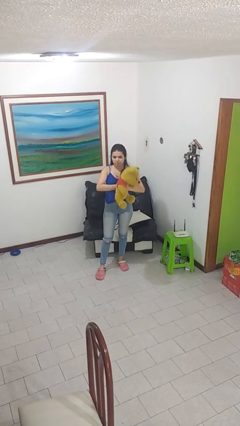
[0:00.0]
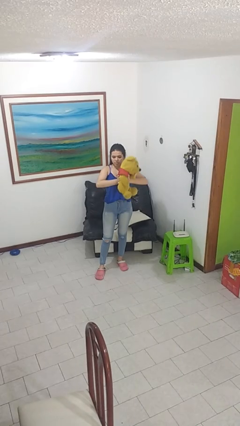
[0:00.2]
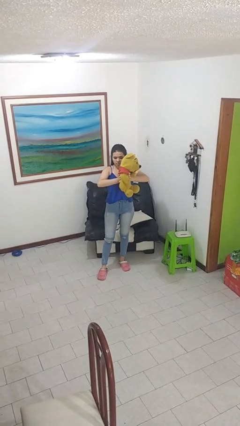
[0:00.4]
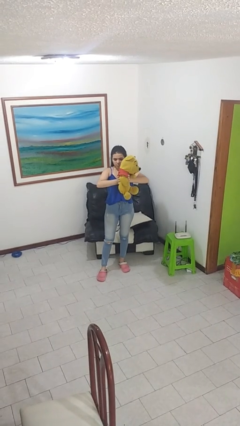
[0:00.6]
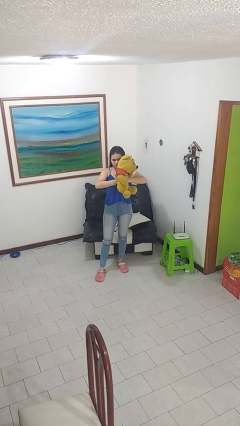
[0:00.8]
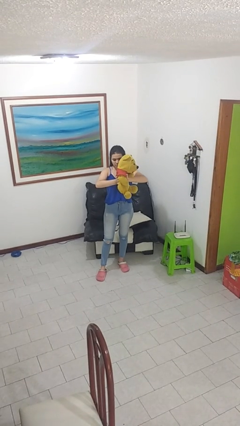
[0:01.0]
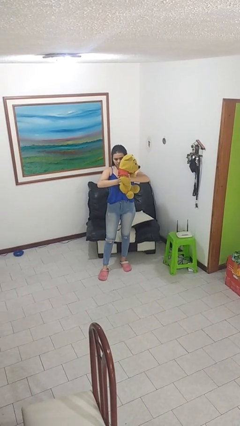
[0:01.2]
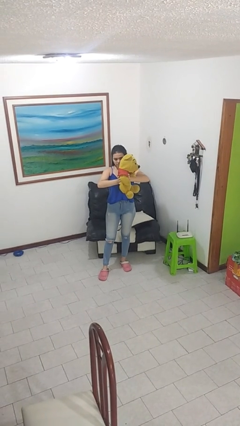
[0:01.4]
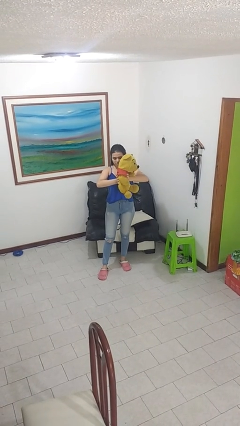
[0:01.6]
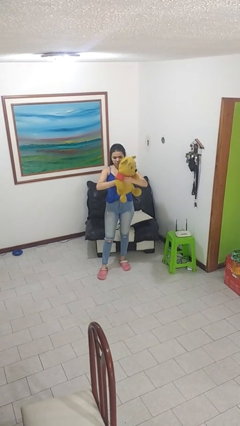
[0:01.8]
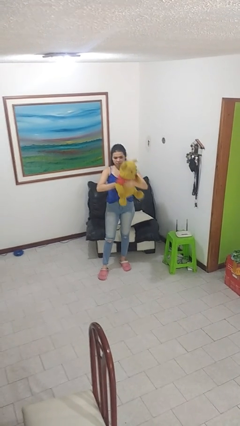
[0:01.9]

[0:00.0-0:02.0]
person squeezes object

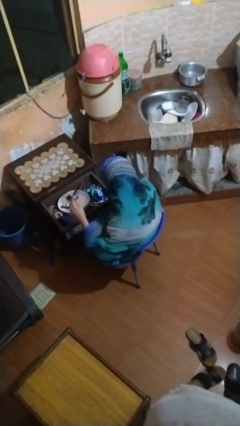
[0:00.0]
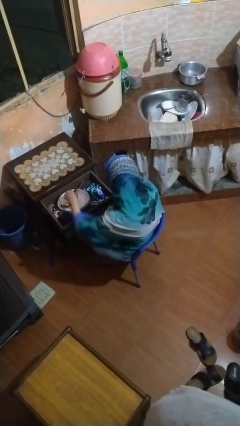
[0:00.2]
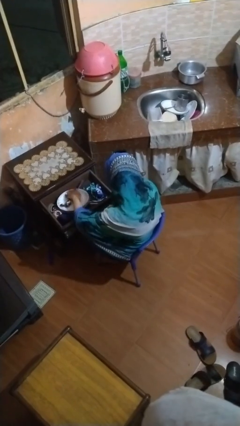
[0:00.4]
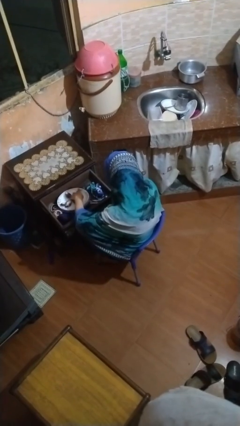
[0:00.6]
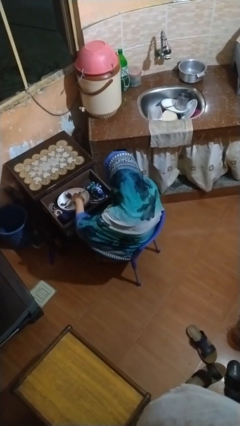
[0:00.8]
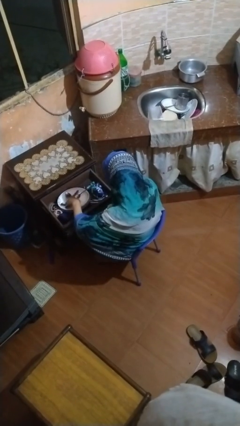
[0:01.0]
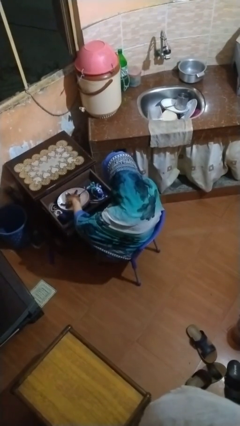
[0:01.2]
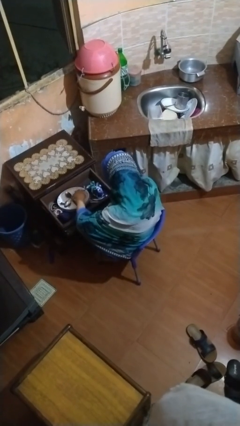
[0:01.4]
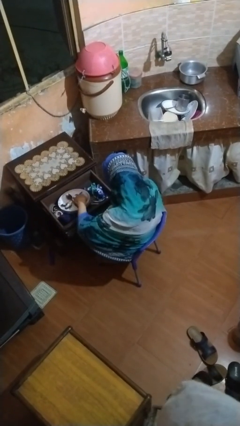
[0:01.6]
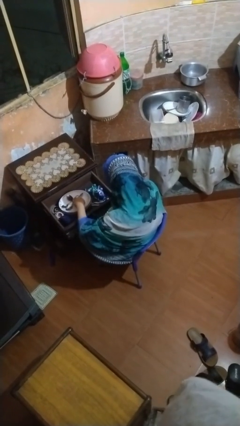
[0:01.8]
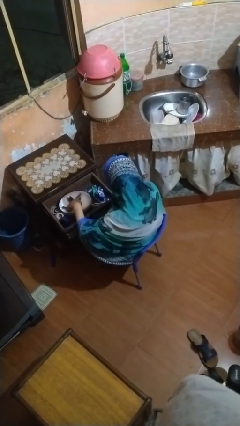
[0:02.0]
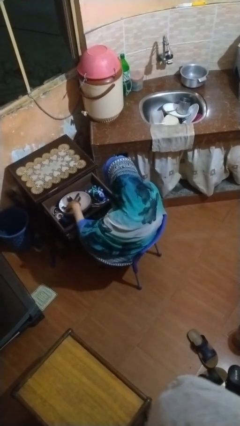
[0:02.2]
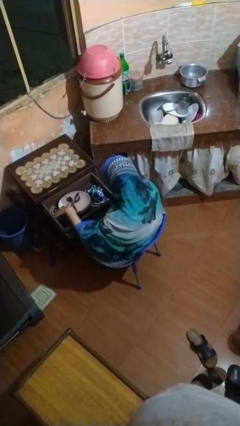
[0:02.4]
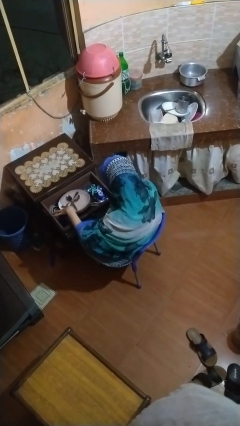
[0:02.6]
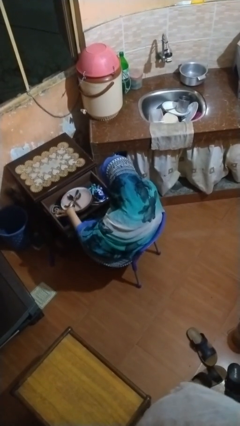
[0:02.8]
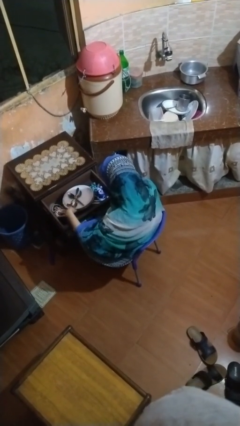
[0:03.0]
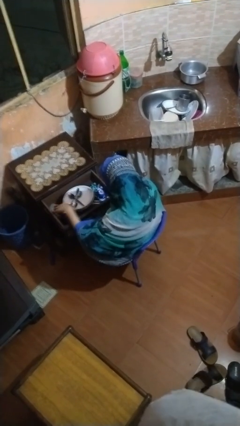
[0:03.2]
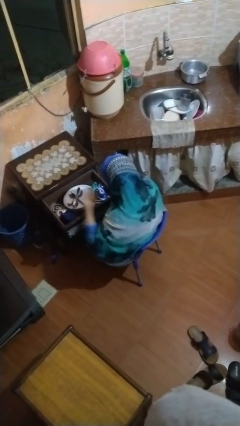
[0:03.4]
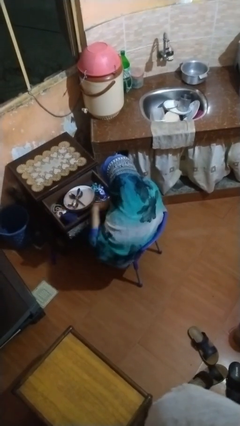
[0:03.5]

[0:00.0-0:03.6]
person searches in kitchen drawer

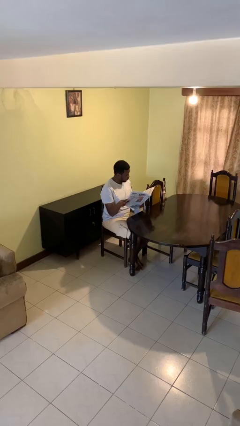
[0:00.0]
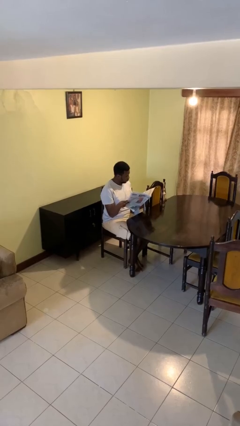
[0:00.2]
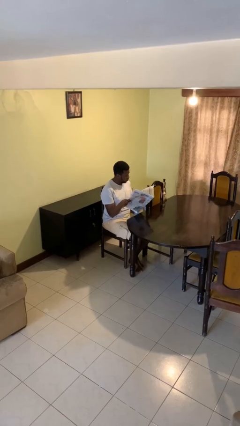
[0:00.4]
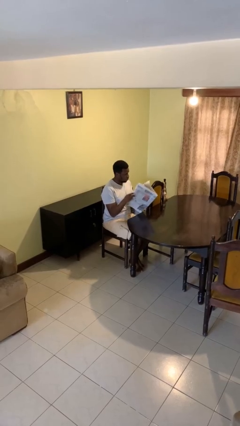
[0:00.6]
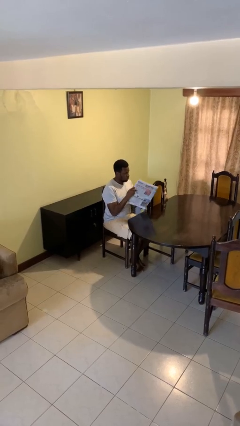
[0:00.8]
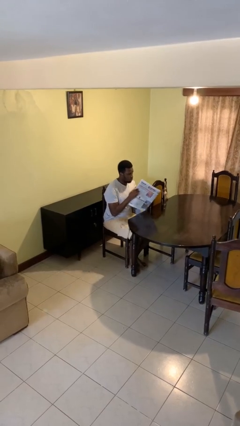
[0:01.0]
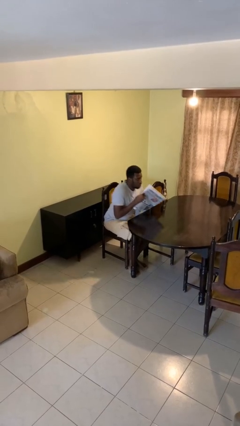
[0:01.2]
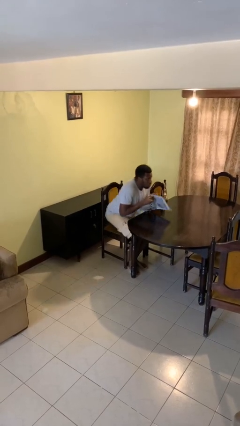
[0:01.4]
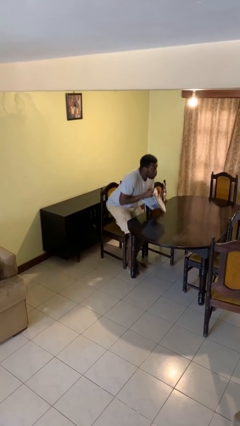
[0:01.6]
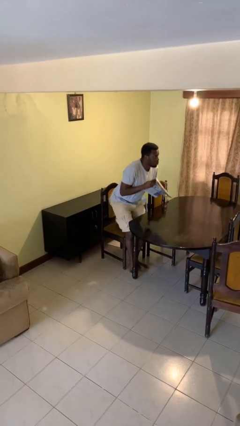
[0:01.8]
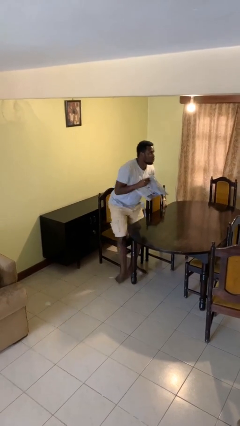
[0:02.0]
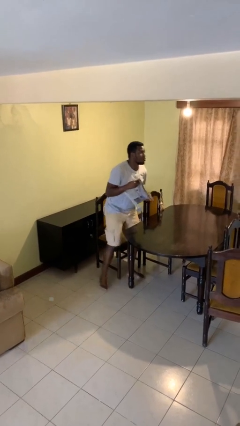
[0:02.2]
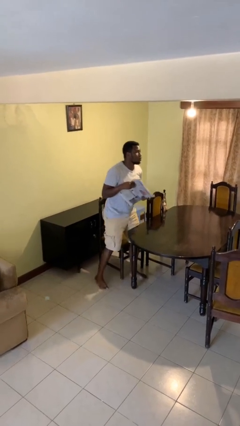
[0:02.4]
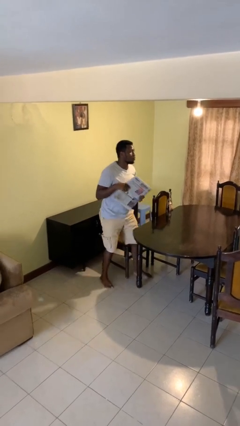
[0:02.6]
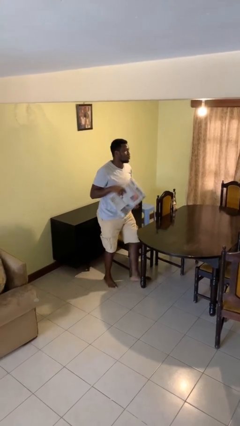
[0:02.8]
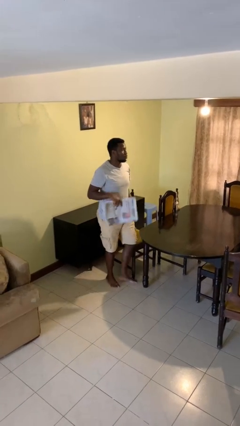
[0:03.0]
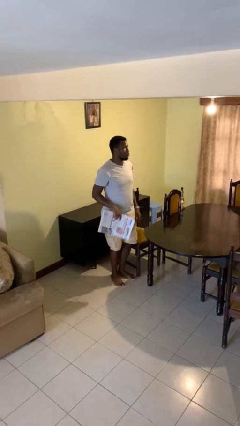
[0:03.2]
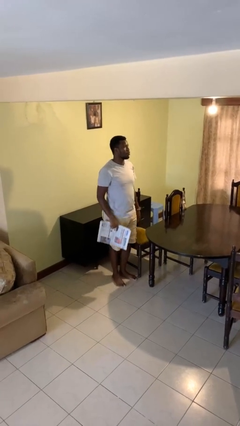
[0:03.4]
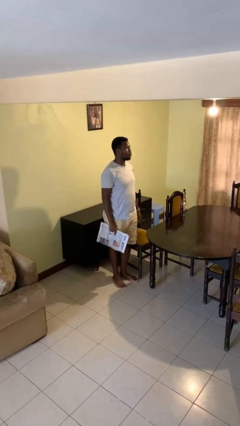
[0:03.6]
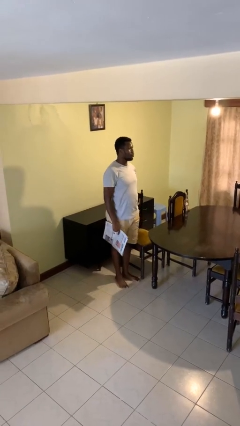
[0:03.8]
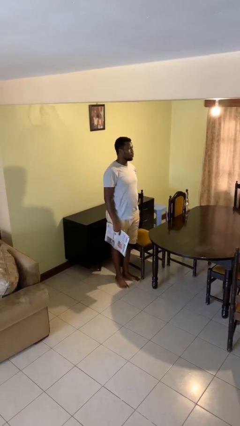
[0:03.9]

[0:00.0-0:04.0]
person stands up

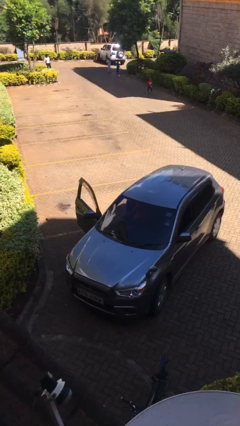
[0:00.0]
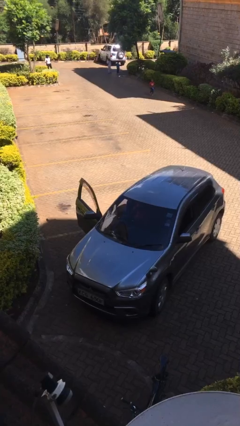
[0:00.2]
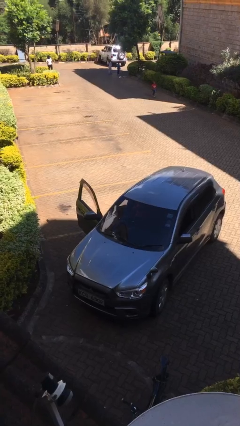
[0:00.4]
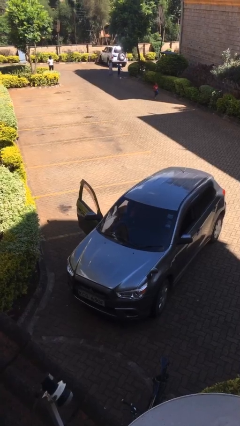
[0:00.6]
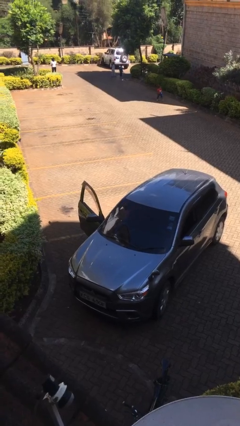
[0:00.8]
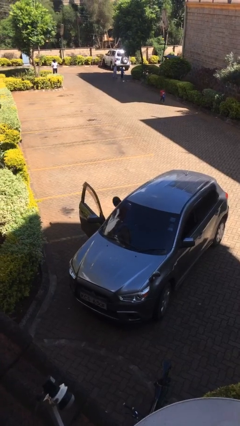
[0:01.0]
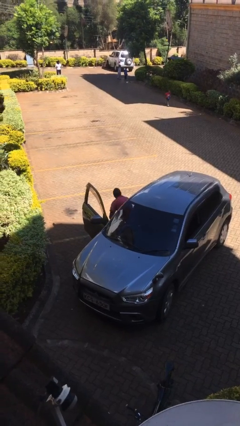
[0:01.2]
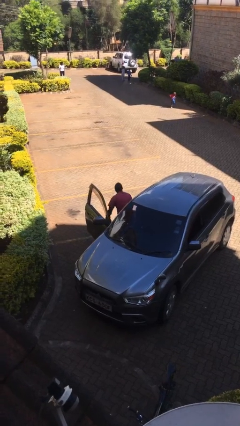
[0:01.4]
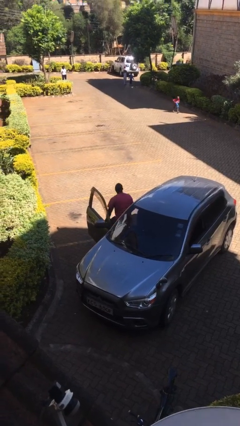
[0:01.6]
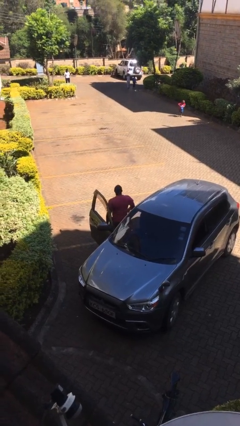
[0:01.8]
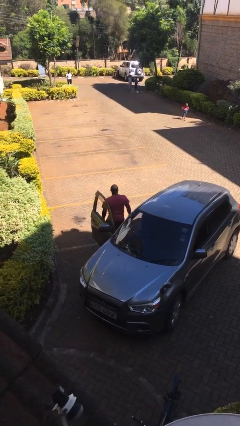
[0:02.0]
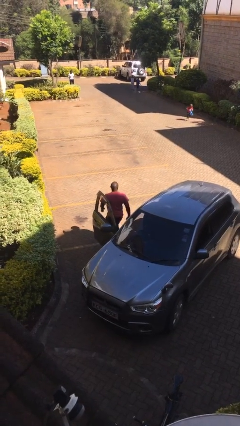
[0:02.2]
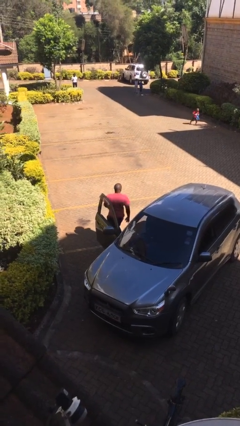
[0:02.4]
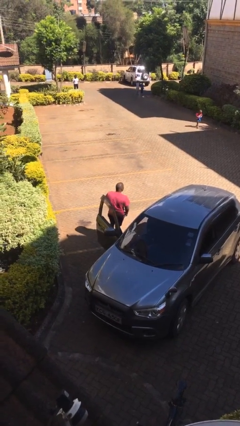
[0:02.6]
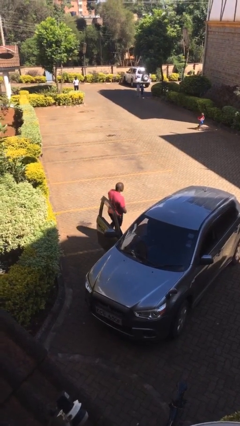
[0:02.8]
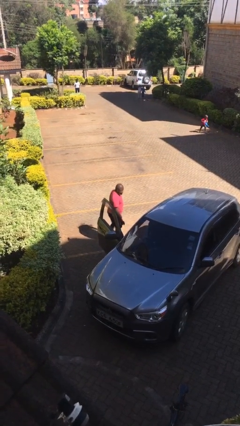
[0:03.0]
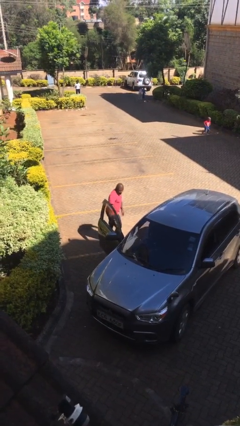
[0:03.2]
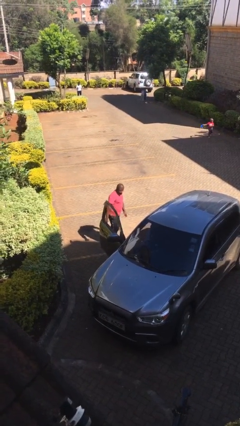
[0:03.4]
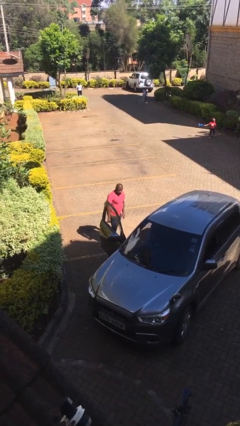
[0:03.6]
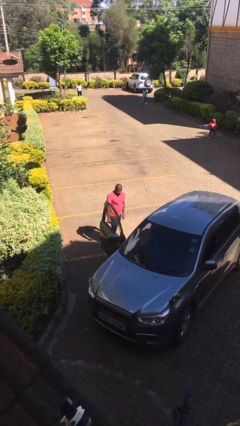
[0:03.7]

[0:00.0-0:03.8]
person exits car

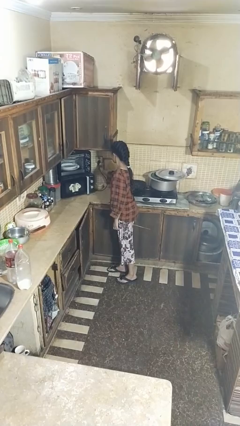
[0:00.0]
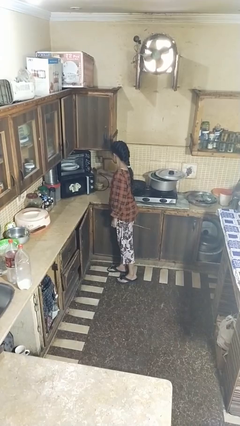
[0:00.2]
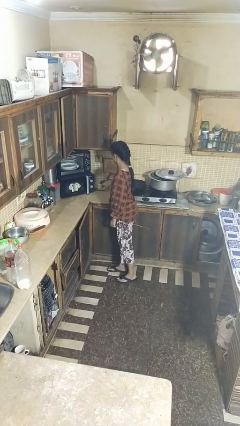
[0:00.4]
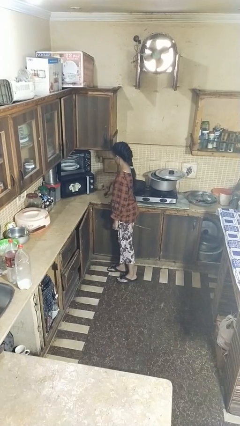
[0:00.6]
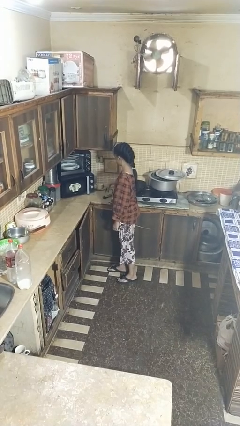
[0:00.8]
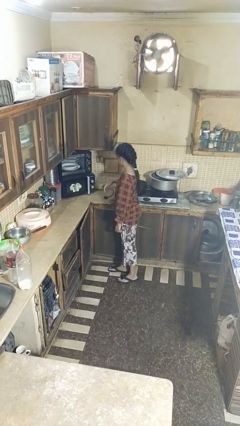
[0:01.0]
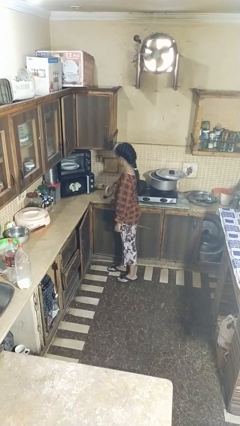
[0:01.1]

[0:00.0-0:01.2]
person unplugs from electrical socket

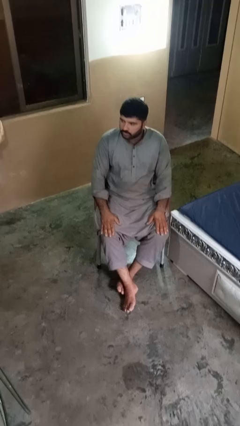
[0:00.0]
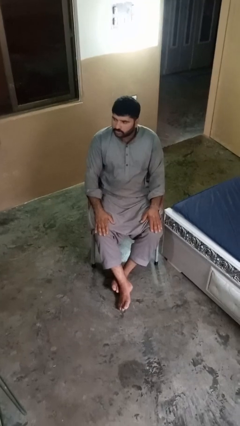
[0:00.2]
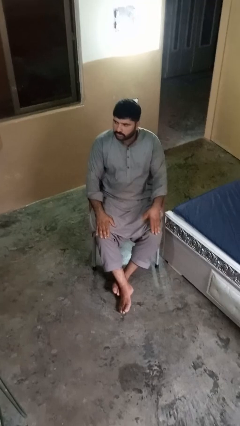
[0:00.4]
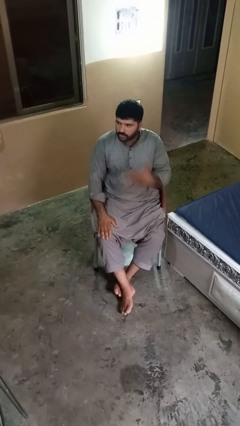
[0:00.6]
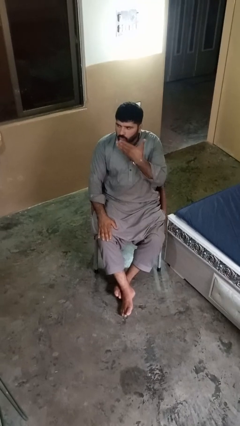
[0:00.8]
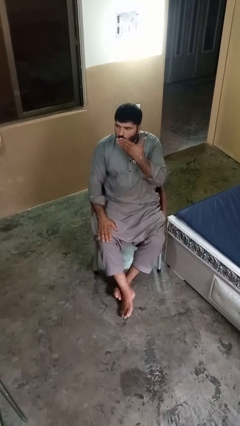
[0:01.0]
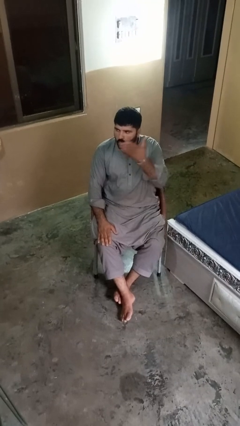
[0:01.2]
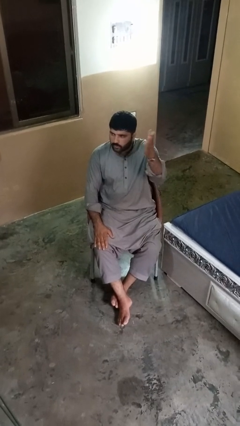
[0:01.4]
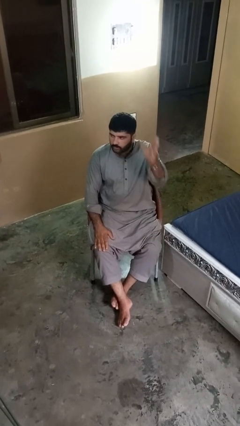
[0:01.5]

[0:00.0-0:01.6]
person gestures blow kiss

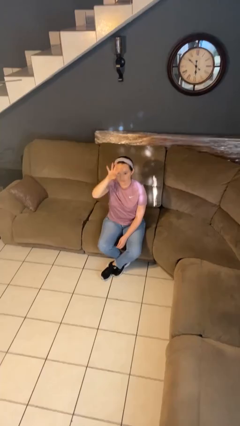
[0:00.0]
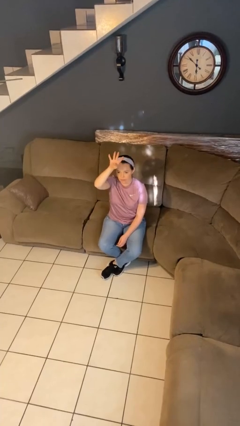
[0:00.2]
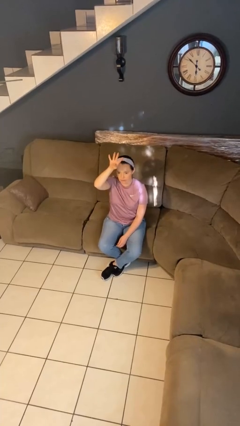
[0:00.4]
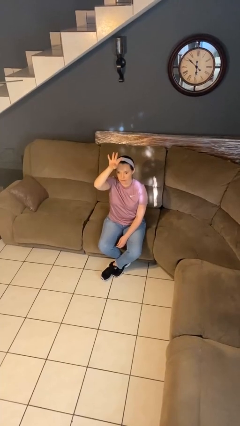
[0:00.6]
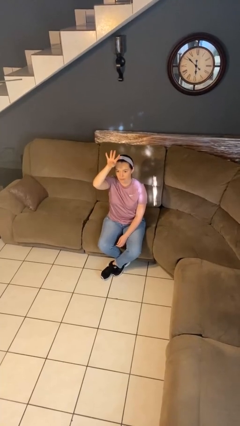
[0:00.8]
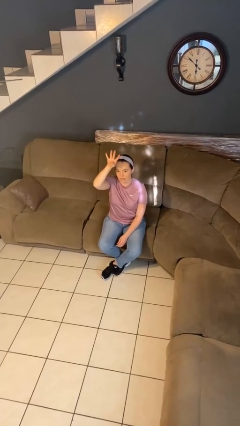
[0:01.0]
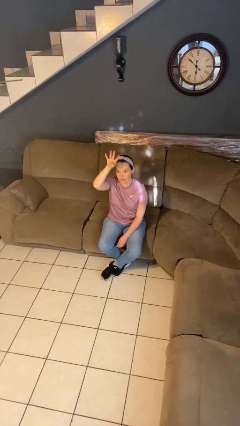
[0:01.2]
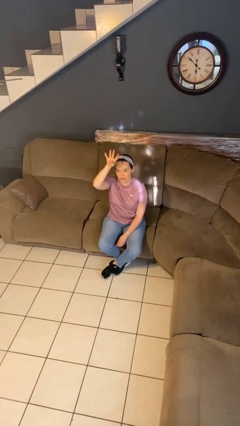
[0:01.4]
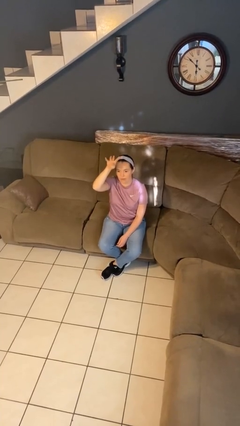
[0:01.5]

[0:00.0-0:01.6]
person gestures number four
